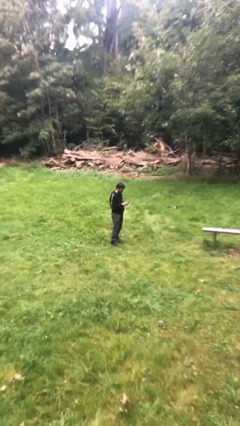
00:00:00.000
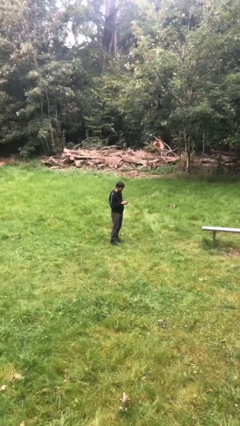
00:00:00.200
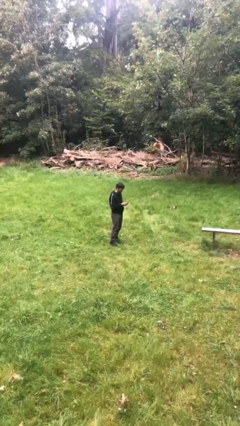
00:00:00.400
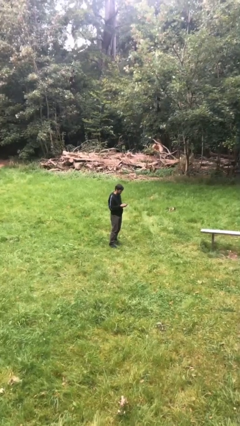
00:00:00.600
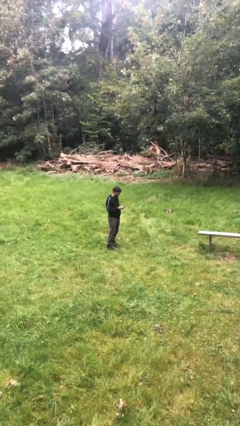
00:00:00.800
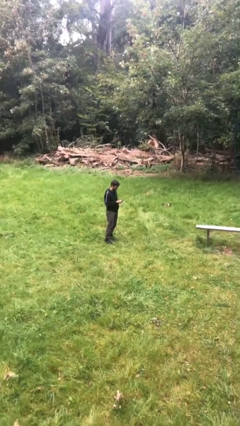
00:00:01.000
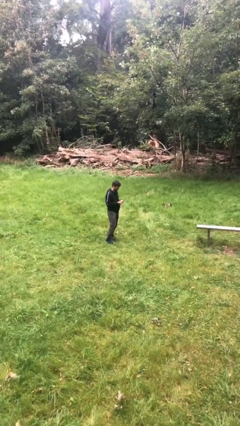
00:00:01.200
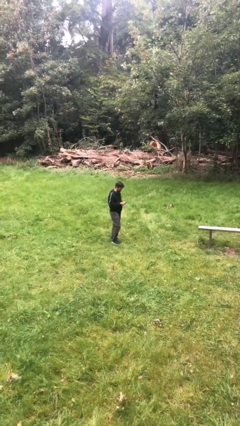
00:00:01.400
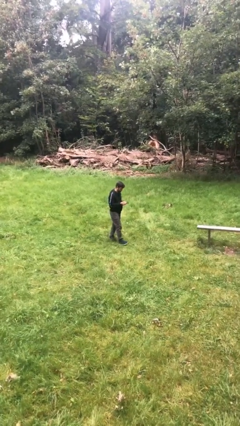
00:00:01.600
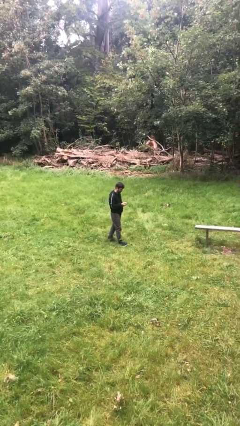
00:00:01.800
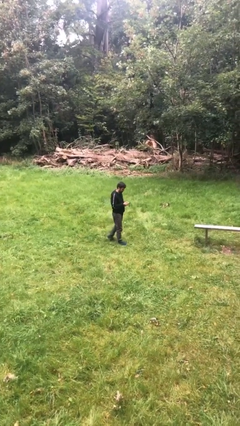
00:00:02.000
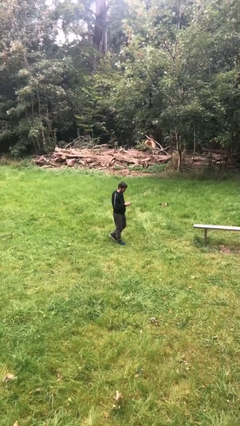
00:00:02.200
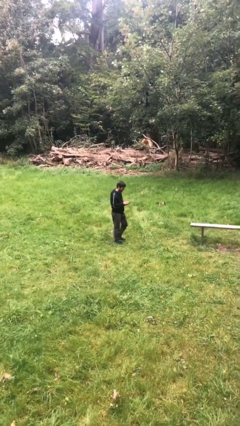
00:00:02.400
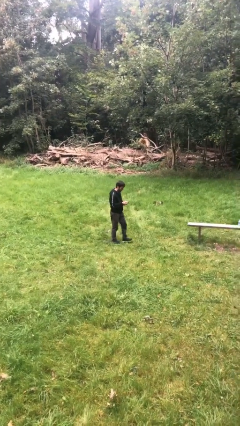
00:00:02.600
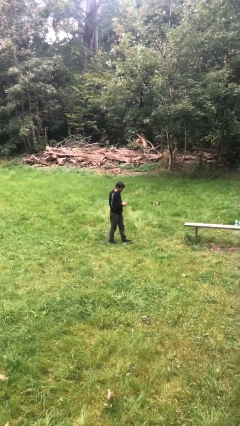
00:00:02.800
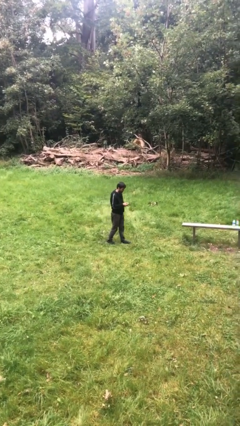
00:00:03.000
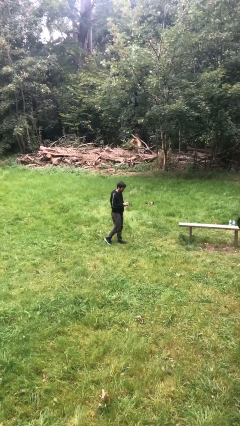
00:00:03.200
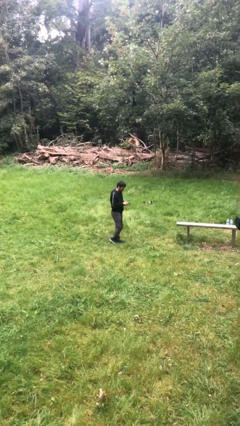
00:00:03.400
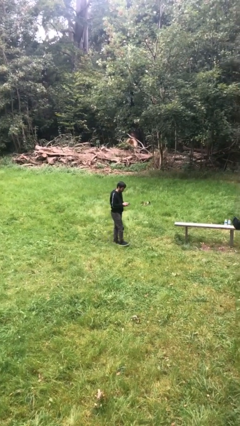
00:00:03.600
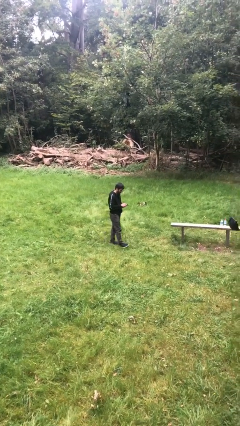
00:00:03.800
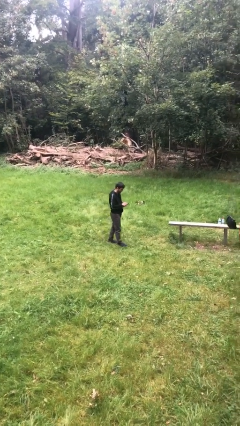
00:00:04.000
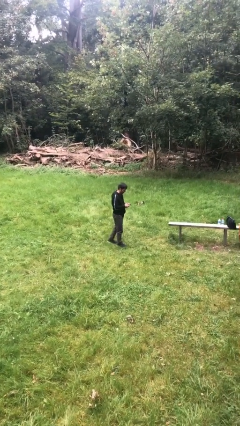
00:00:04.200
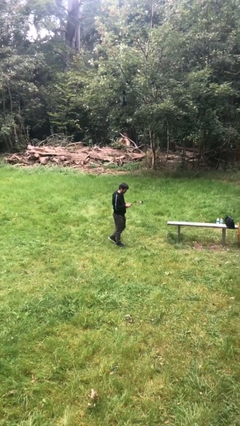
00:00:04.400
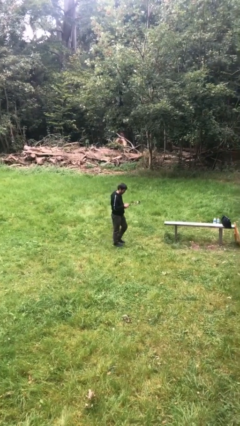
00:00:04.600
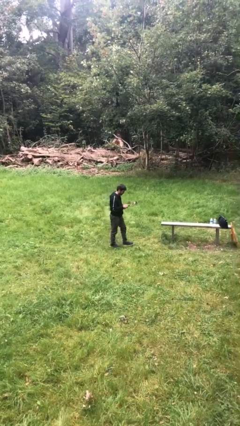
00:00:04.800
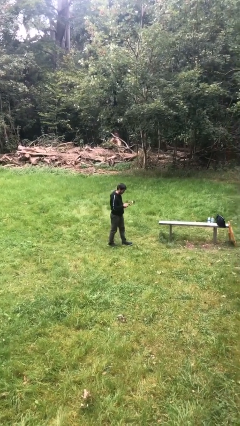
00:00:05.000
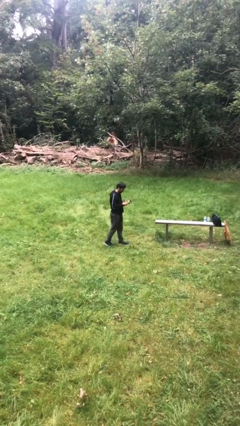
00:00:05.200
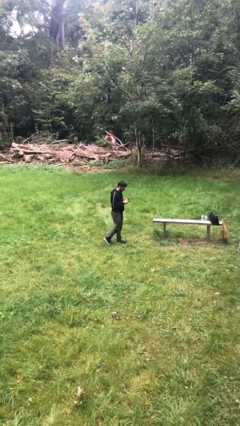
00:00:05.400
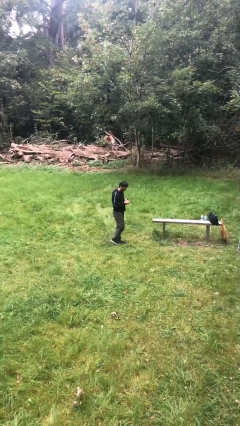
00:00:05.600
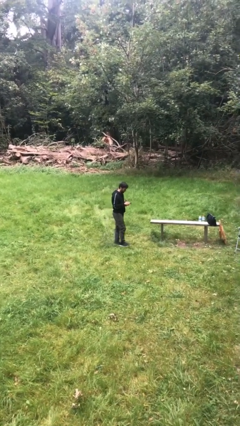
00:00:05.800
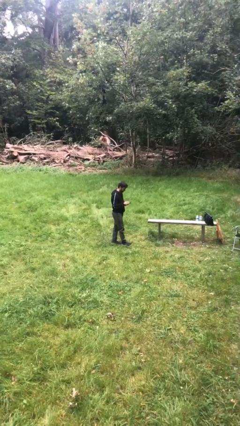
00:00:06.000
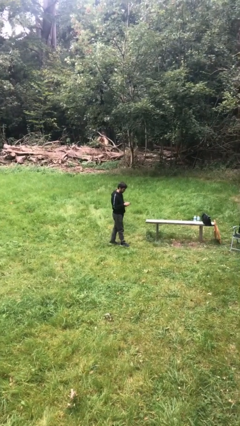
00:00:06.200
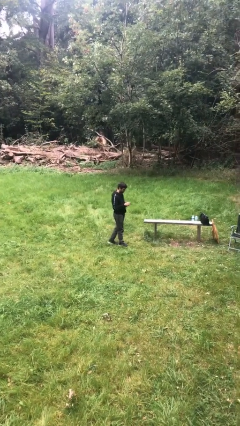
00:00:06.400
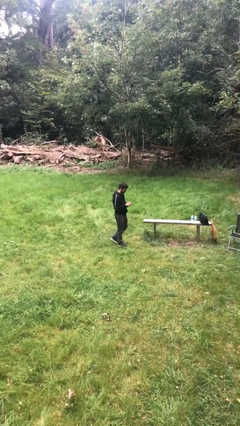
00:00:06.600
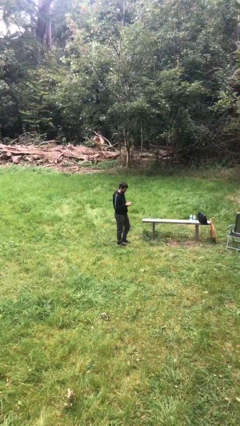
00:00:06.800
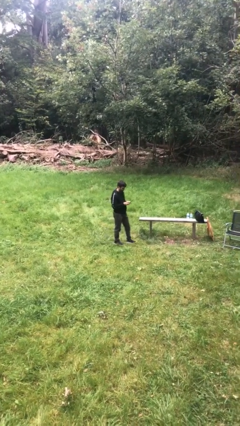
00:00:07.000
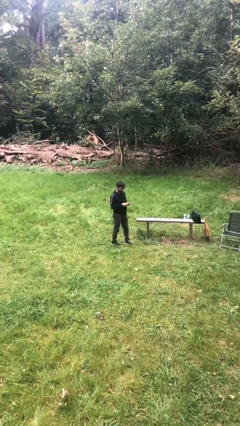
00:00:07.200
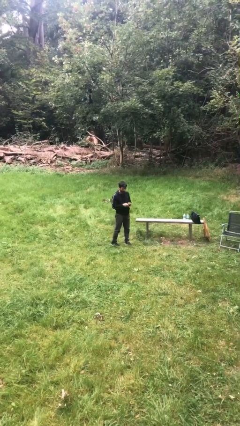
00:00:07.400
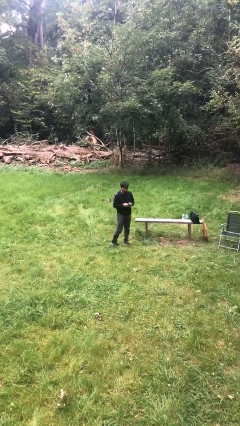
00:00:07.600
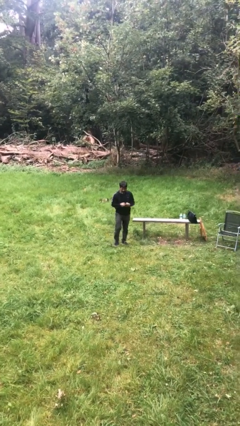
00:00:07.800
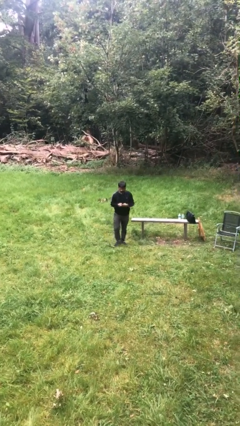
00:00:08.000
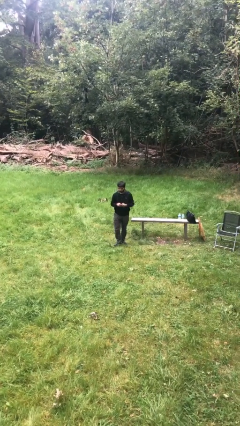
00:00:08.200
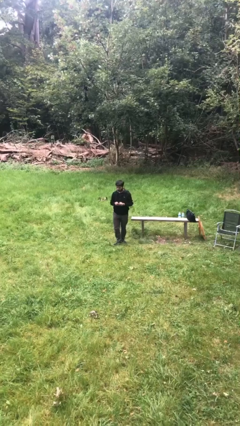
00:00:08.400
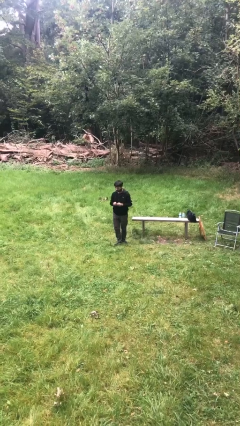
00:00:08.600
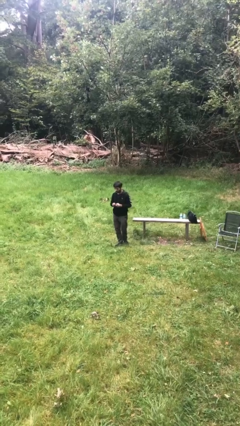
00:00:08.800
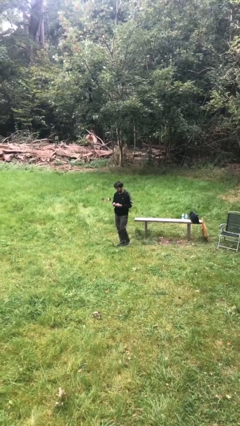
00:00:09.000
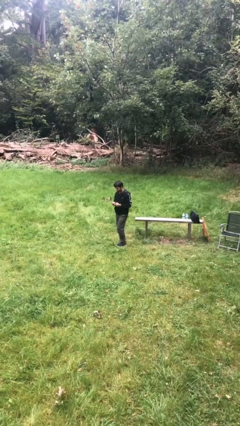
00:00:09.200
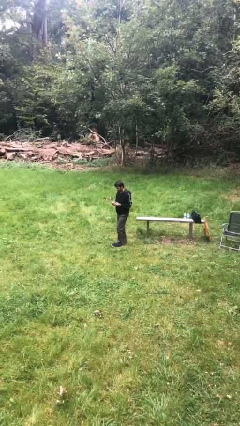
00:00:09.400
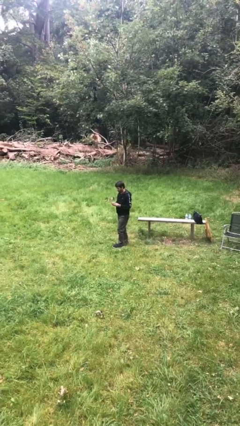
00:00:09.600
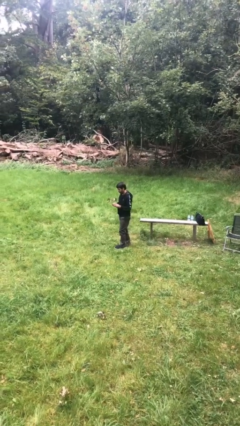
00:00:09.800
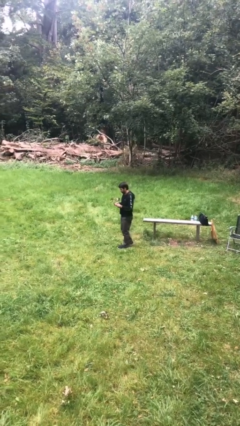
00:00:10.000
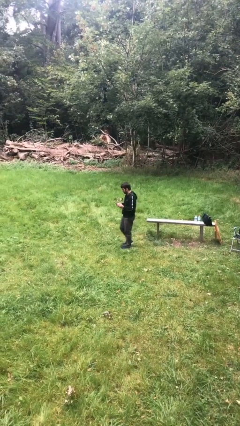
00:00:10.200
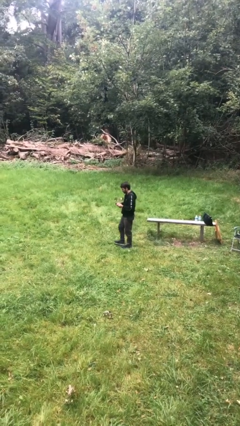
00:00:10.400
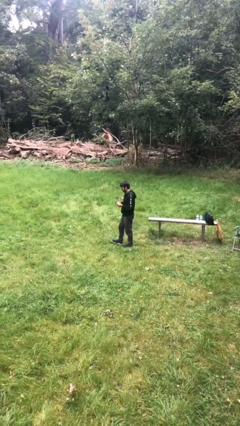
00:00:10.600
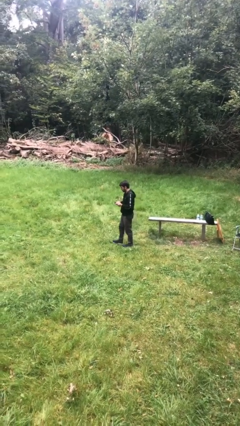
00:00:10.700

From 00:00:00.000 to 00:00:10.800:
person texts on phone

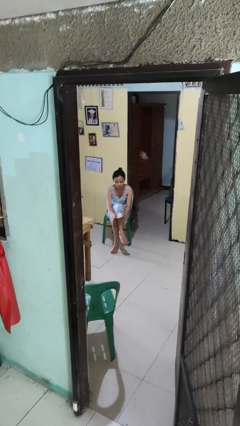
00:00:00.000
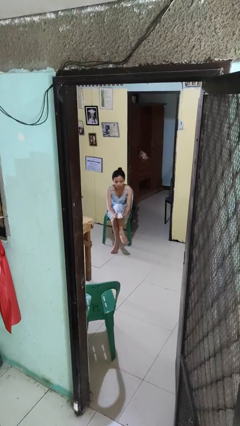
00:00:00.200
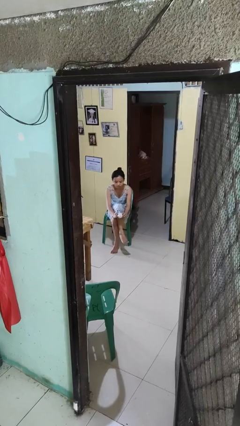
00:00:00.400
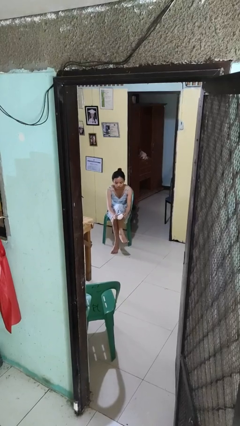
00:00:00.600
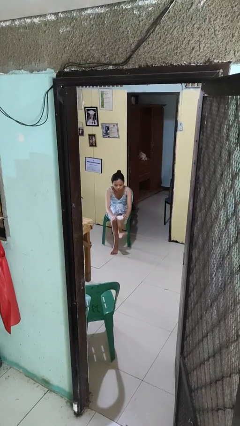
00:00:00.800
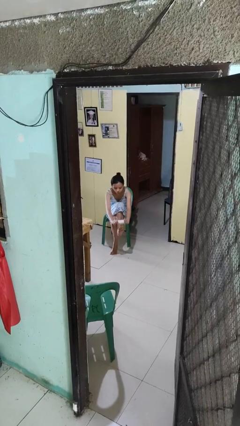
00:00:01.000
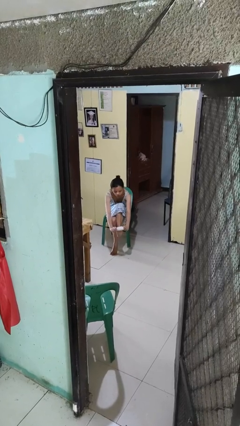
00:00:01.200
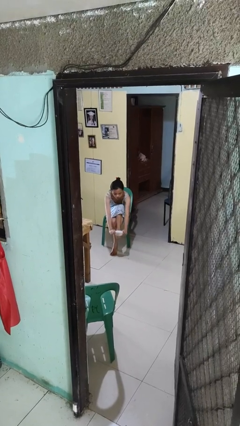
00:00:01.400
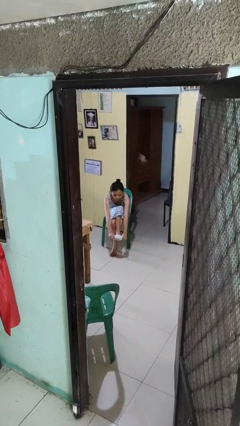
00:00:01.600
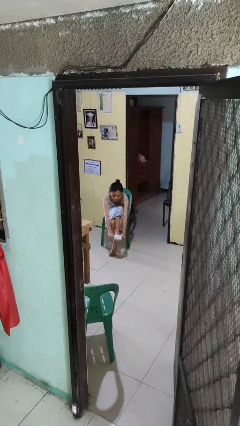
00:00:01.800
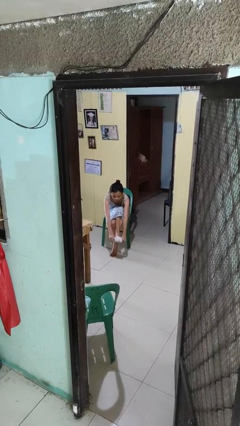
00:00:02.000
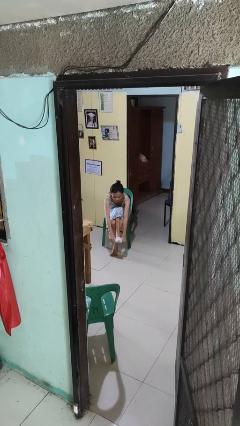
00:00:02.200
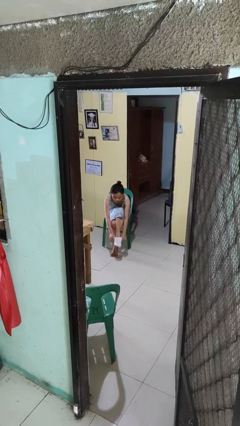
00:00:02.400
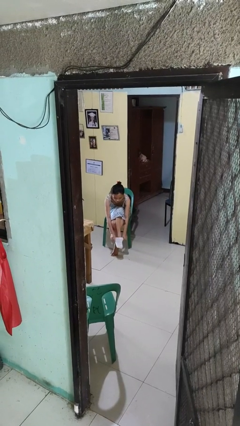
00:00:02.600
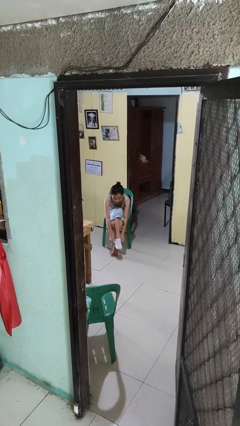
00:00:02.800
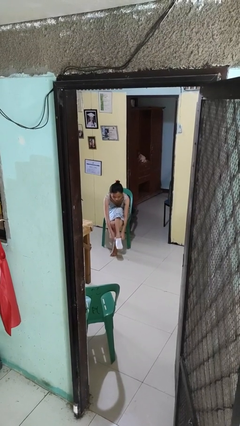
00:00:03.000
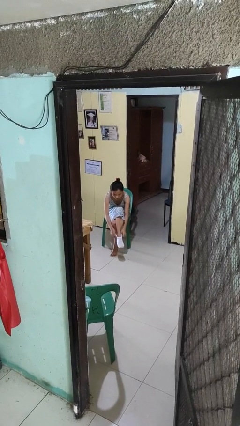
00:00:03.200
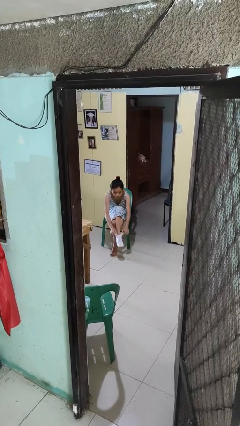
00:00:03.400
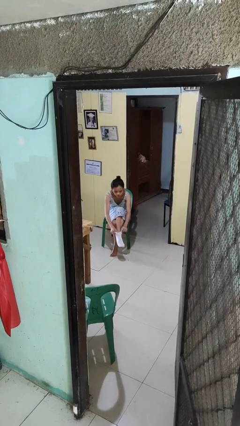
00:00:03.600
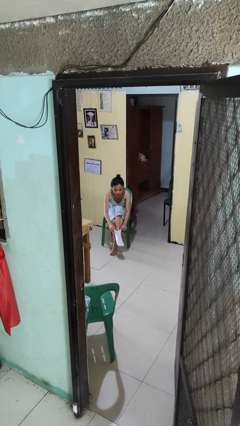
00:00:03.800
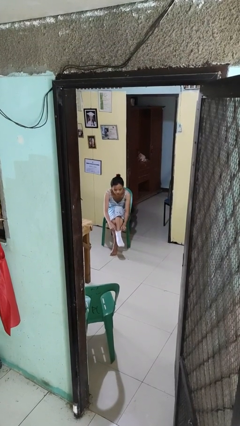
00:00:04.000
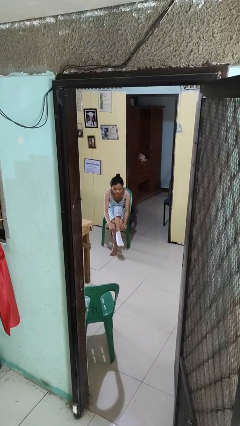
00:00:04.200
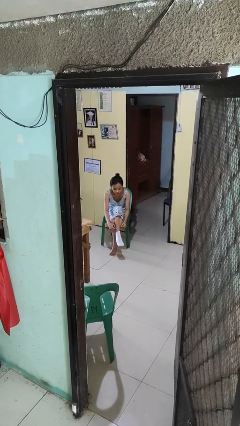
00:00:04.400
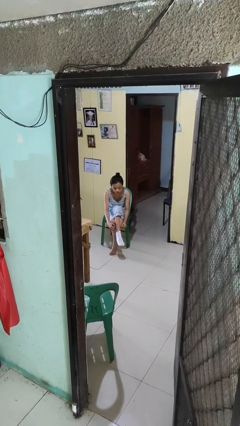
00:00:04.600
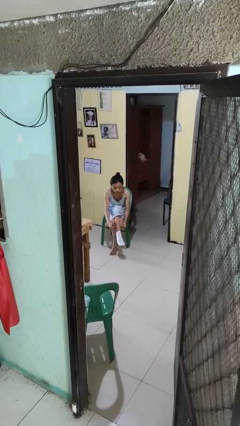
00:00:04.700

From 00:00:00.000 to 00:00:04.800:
person puts on socks

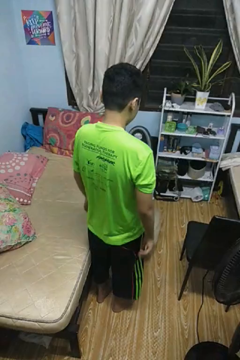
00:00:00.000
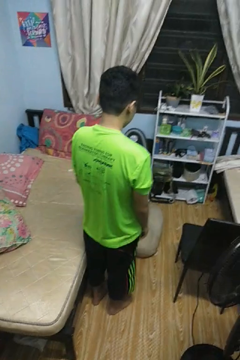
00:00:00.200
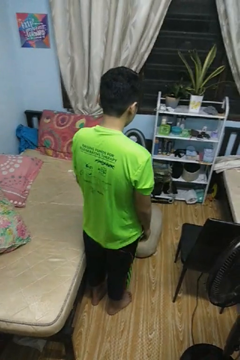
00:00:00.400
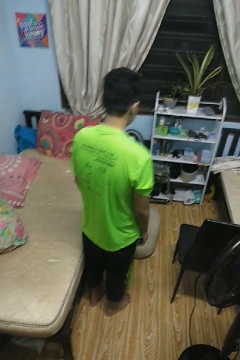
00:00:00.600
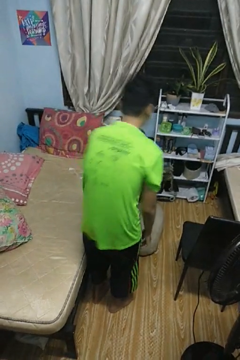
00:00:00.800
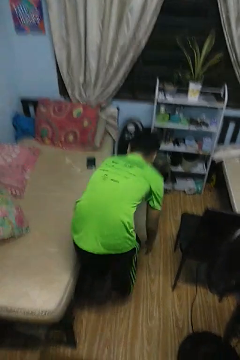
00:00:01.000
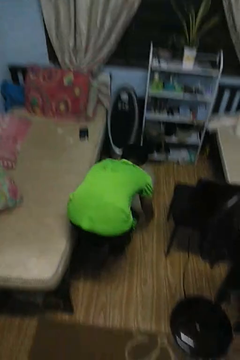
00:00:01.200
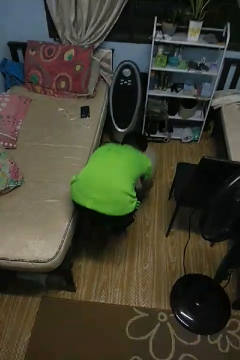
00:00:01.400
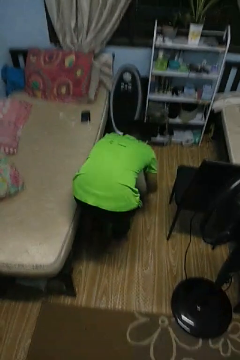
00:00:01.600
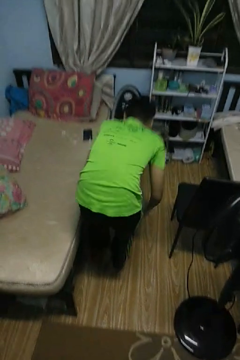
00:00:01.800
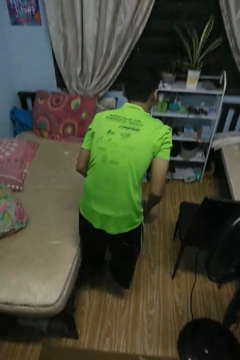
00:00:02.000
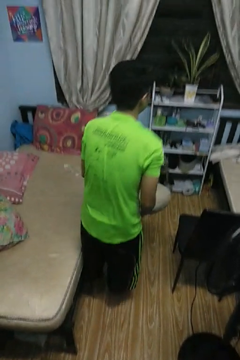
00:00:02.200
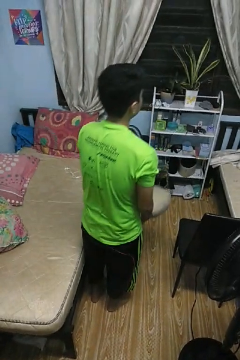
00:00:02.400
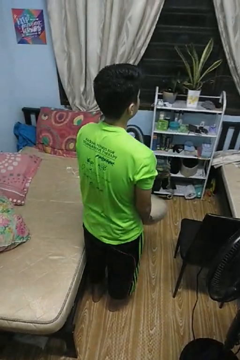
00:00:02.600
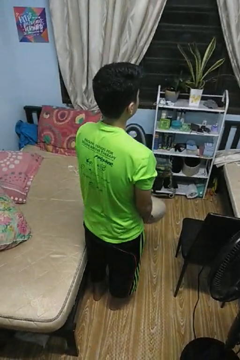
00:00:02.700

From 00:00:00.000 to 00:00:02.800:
person picks up object from floor
